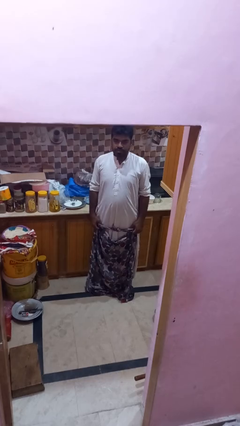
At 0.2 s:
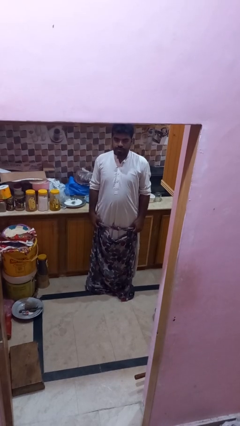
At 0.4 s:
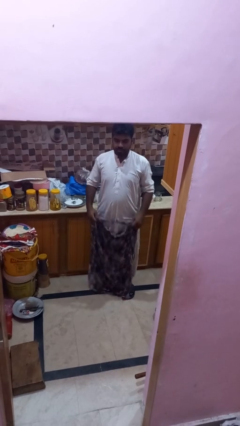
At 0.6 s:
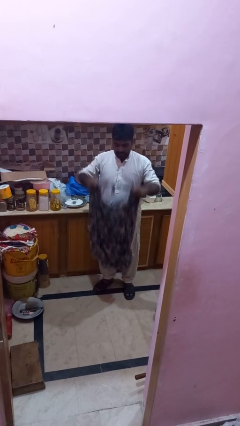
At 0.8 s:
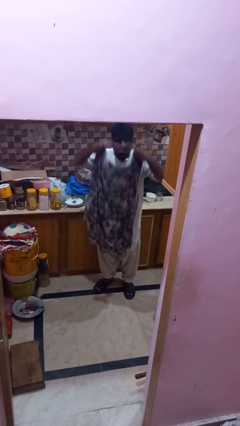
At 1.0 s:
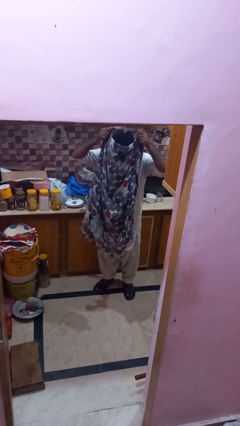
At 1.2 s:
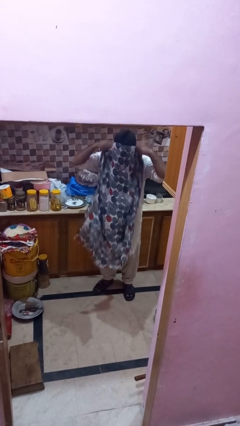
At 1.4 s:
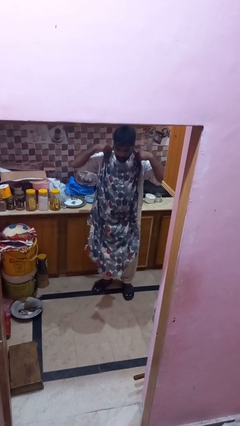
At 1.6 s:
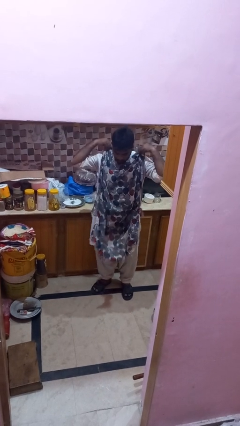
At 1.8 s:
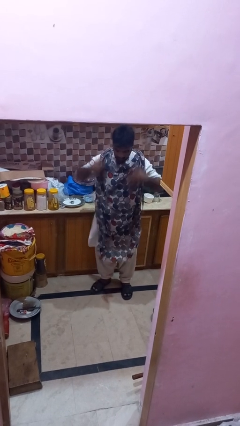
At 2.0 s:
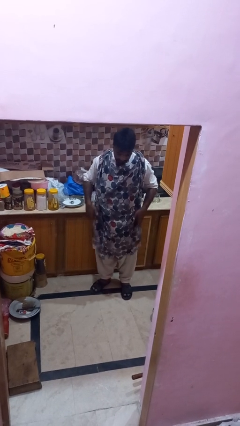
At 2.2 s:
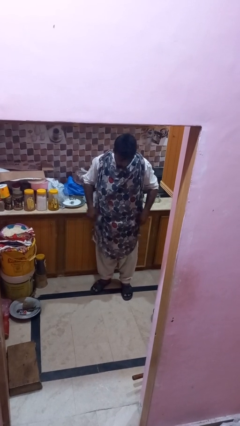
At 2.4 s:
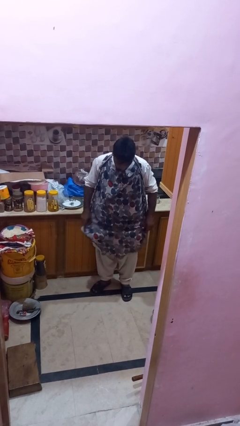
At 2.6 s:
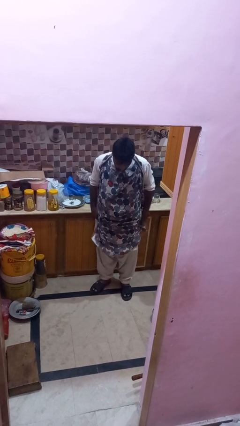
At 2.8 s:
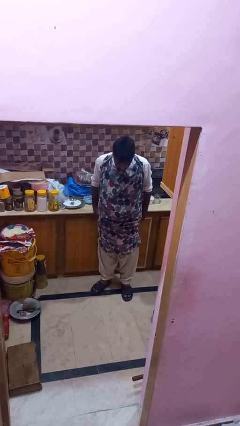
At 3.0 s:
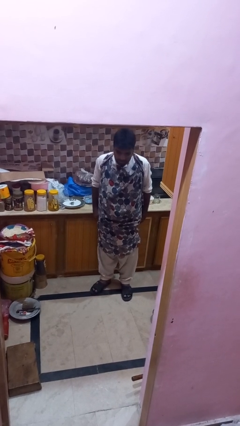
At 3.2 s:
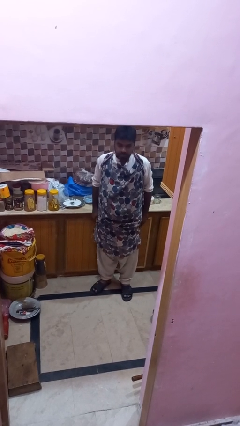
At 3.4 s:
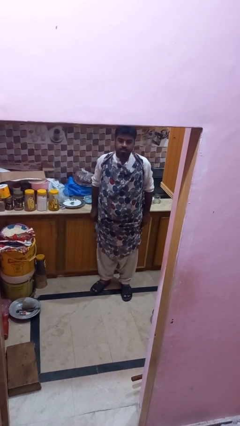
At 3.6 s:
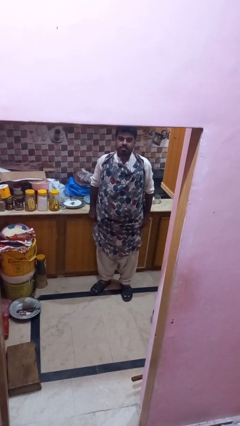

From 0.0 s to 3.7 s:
person puts on apron

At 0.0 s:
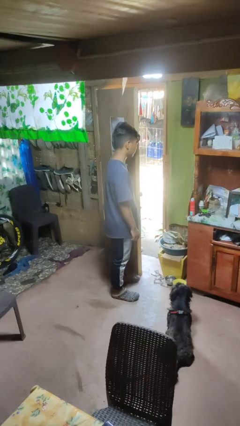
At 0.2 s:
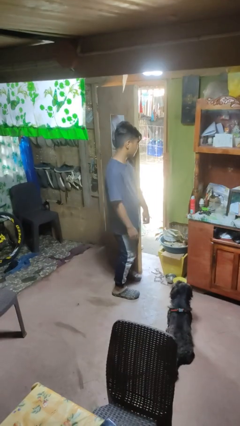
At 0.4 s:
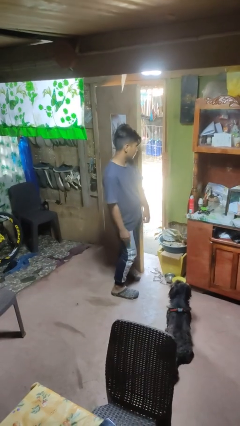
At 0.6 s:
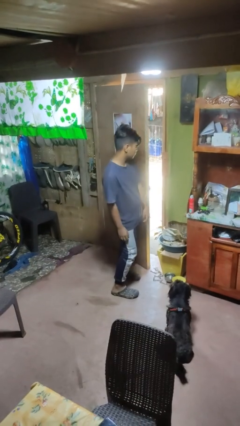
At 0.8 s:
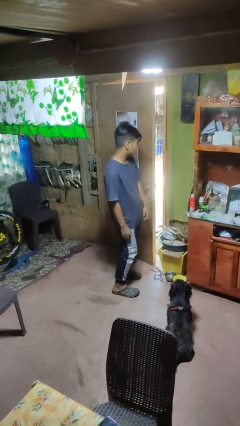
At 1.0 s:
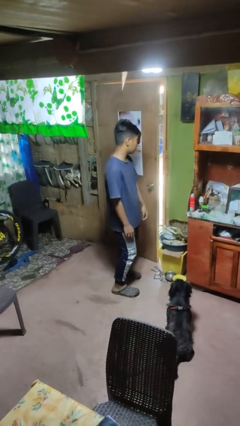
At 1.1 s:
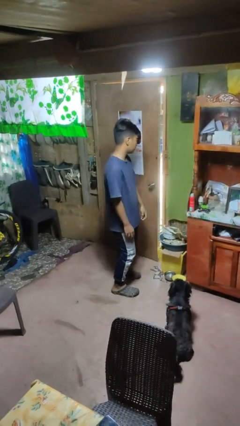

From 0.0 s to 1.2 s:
person closes door with hip

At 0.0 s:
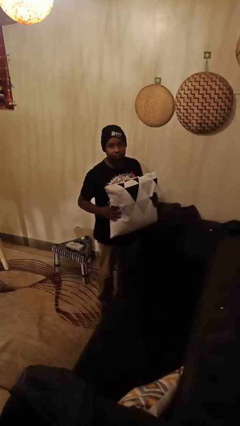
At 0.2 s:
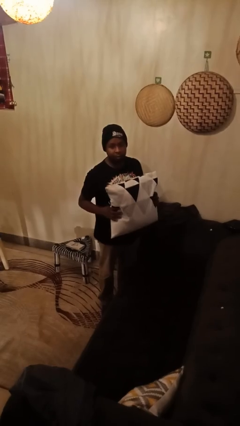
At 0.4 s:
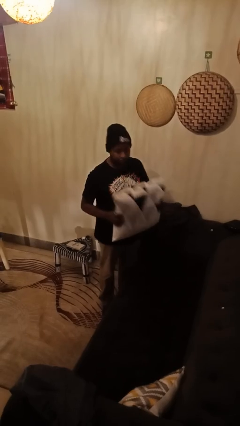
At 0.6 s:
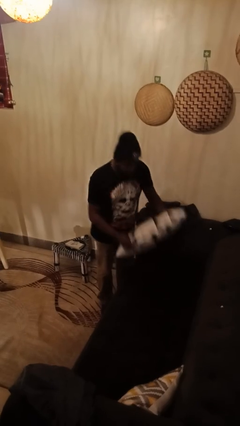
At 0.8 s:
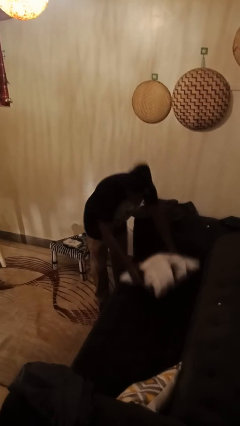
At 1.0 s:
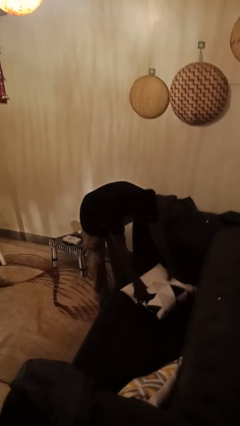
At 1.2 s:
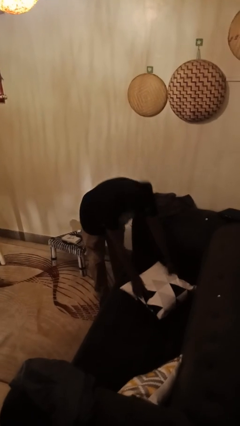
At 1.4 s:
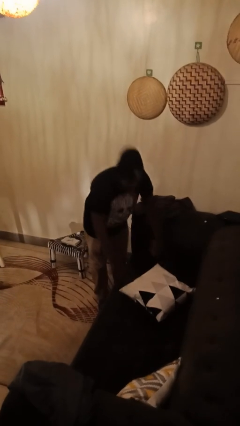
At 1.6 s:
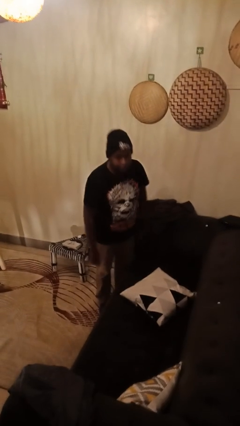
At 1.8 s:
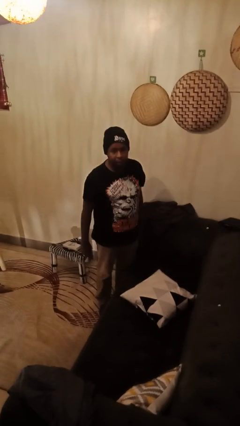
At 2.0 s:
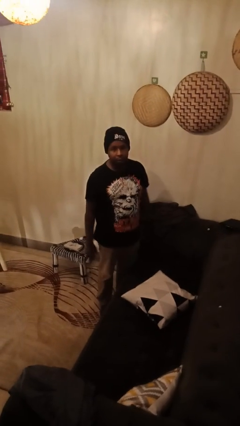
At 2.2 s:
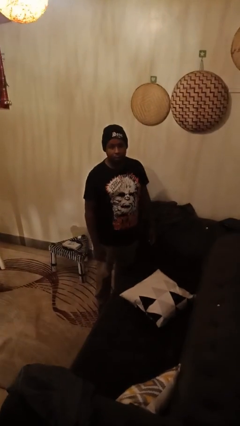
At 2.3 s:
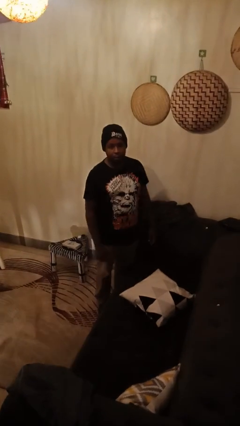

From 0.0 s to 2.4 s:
person puts down object on couch

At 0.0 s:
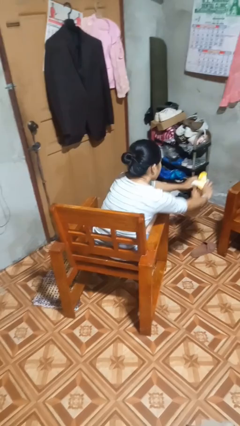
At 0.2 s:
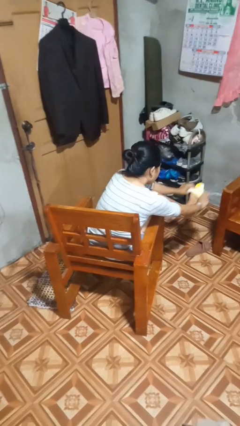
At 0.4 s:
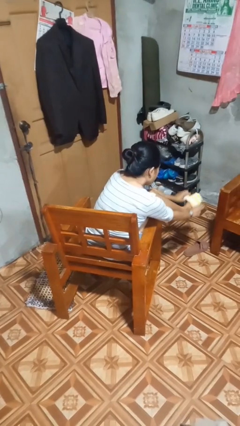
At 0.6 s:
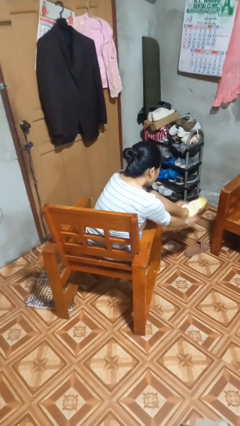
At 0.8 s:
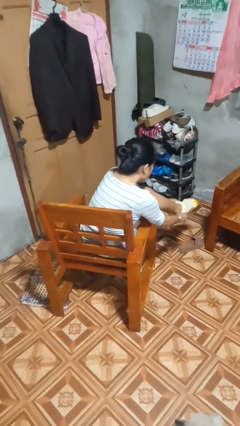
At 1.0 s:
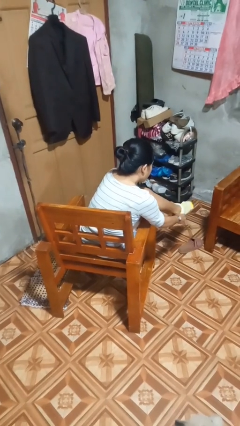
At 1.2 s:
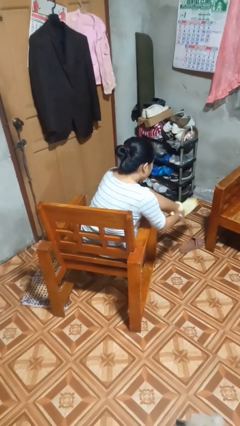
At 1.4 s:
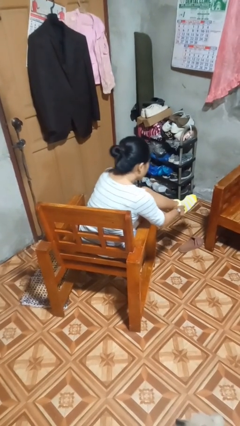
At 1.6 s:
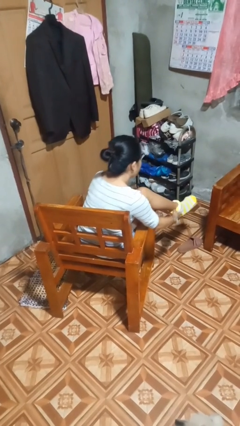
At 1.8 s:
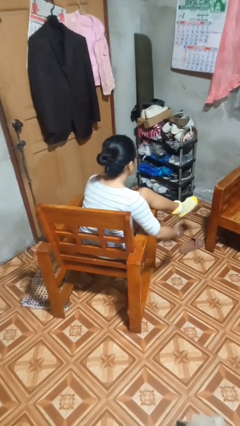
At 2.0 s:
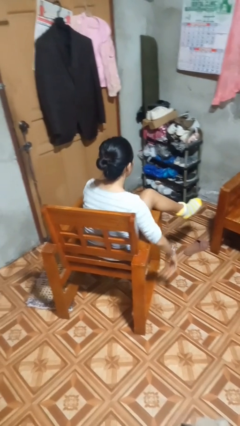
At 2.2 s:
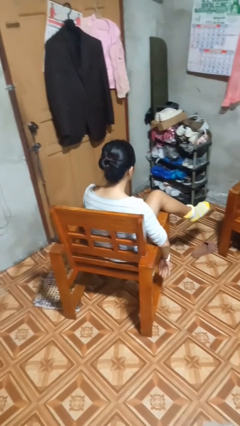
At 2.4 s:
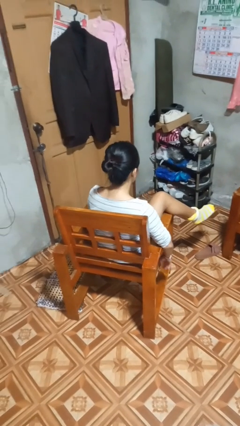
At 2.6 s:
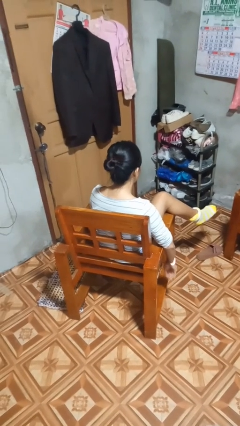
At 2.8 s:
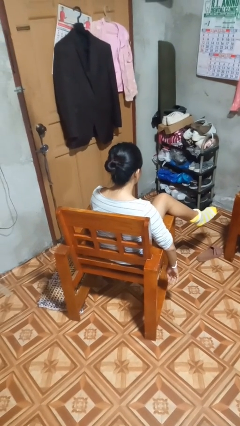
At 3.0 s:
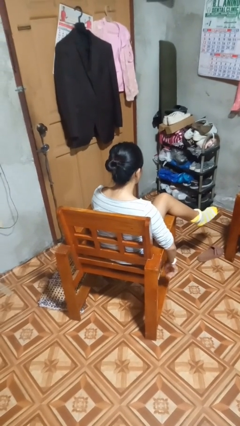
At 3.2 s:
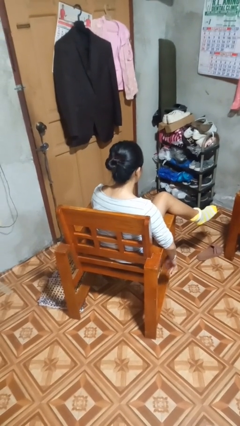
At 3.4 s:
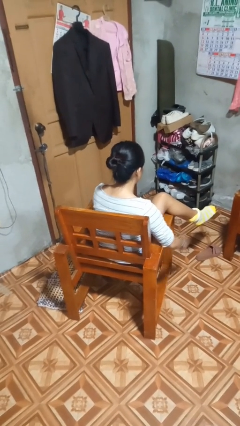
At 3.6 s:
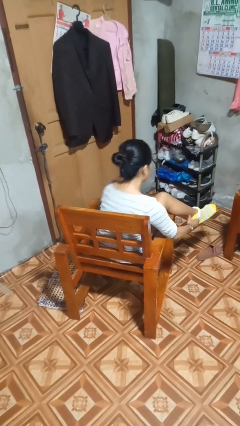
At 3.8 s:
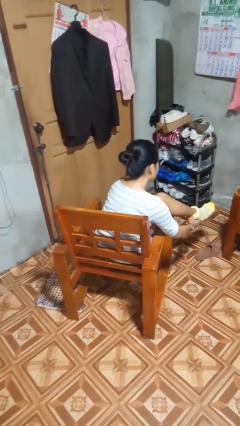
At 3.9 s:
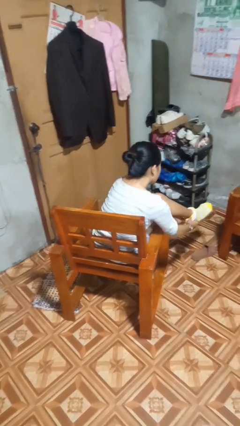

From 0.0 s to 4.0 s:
person puts on socks

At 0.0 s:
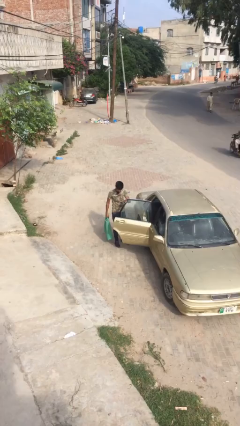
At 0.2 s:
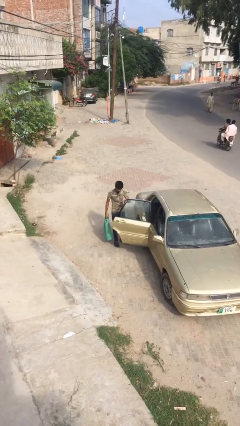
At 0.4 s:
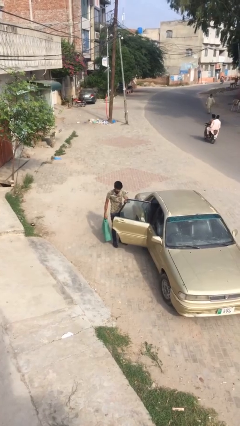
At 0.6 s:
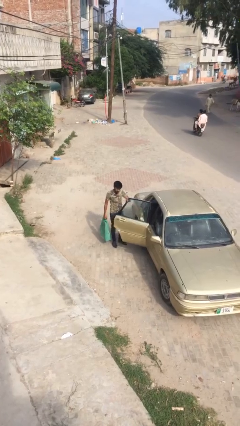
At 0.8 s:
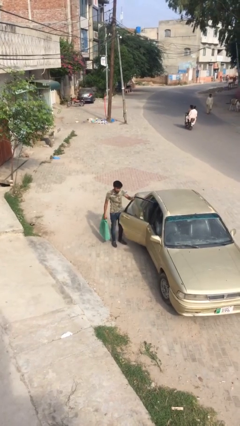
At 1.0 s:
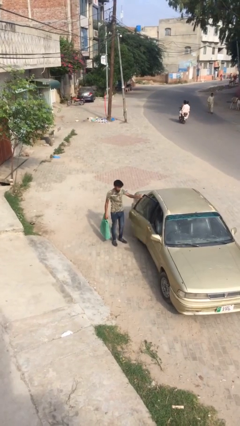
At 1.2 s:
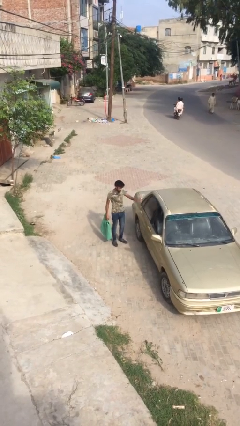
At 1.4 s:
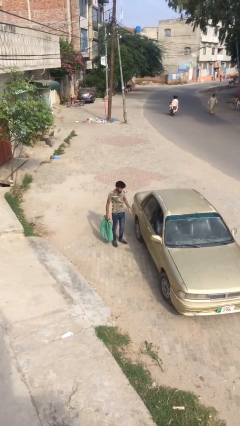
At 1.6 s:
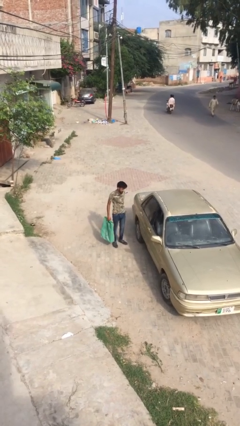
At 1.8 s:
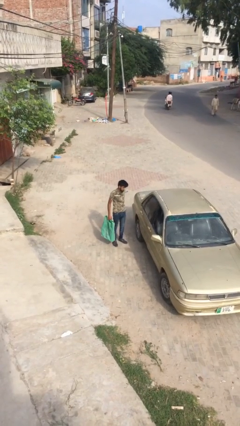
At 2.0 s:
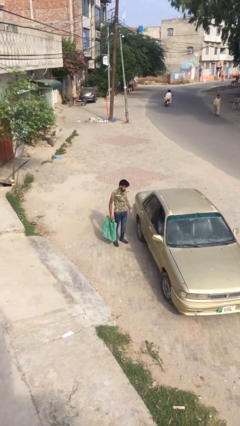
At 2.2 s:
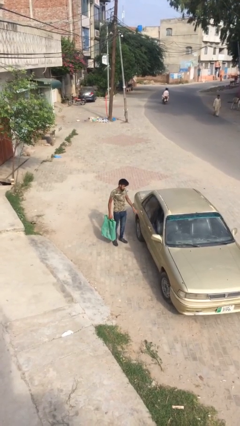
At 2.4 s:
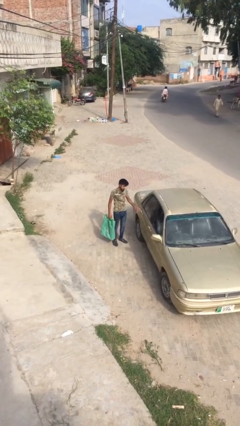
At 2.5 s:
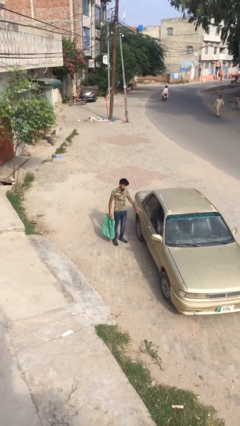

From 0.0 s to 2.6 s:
person closes car door

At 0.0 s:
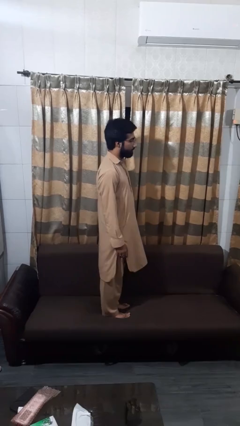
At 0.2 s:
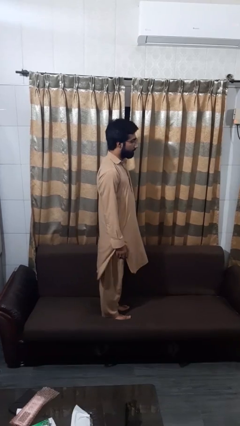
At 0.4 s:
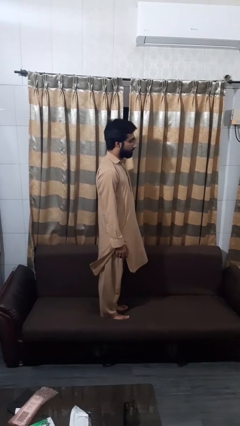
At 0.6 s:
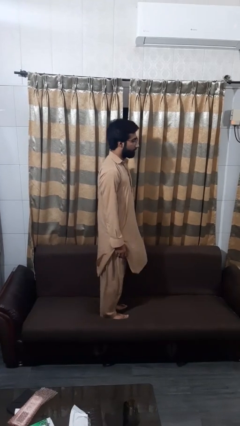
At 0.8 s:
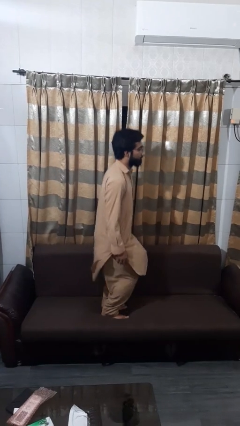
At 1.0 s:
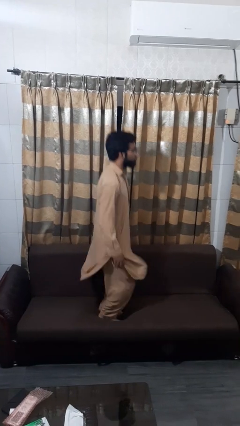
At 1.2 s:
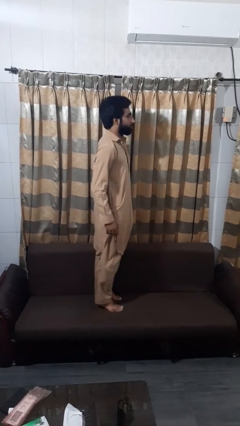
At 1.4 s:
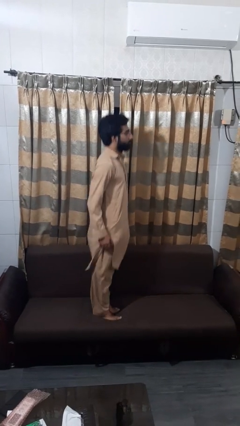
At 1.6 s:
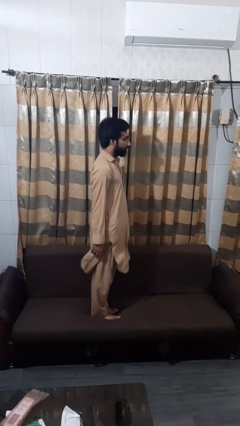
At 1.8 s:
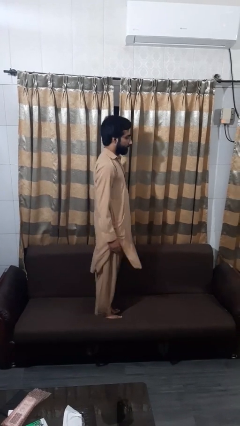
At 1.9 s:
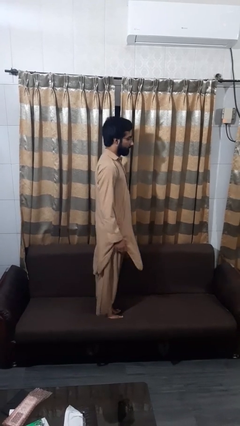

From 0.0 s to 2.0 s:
person jumps on couch

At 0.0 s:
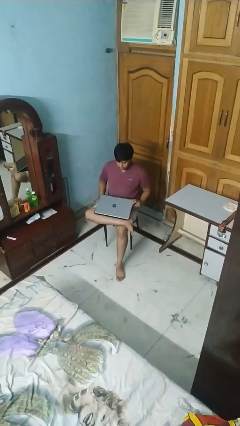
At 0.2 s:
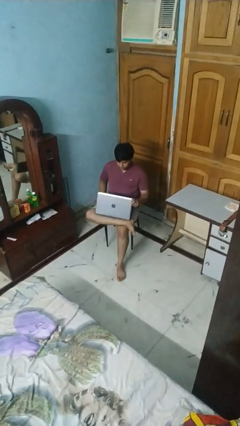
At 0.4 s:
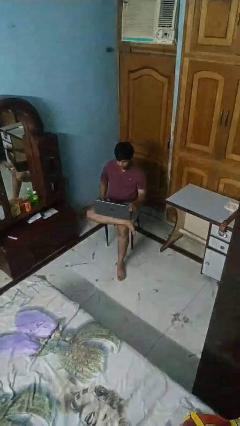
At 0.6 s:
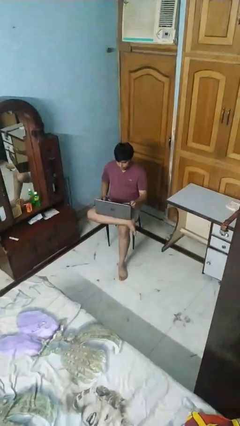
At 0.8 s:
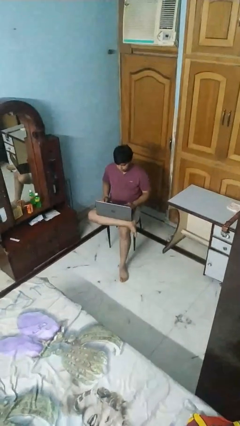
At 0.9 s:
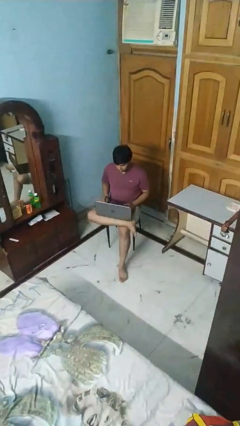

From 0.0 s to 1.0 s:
person opens laptop

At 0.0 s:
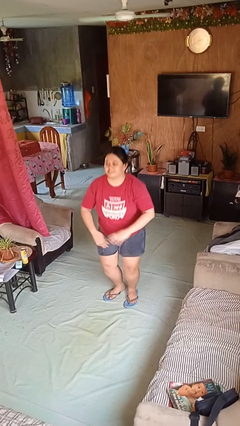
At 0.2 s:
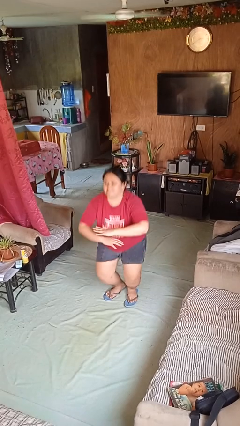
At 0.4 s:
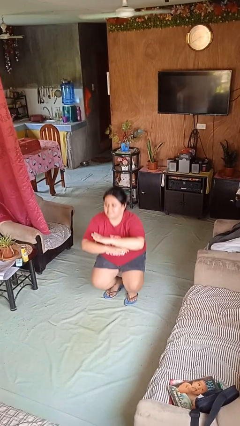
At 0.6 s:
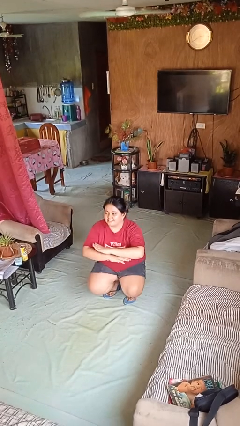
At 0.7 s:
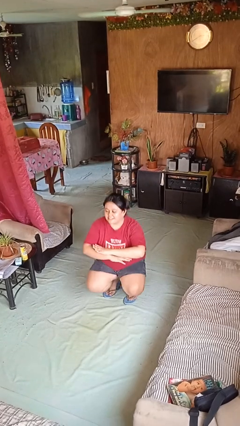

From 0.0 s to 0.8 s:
person squats
